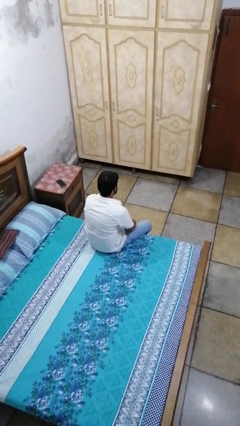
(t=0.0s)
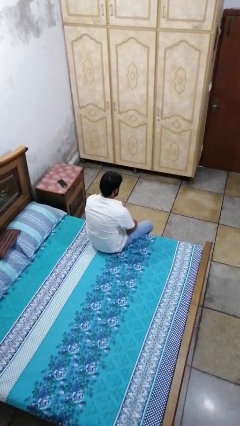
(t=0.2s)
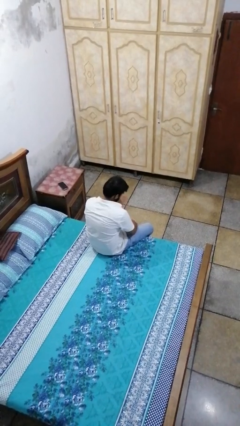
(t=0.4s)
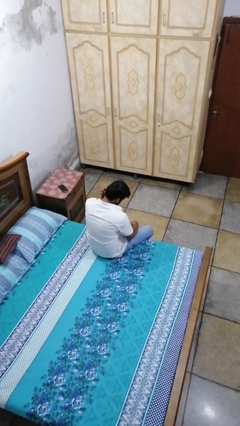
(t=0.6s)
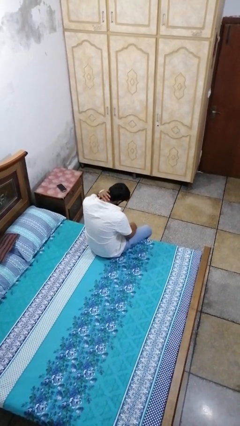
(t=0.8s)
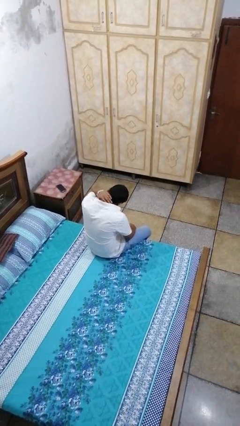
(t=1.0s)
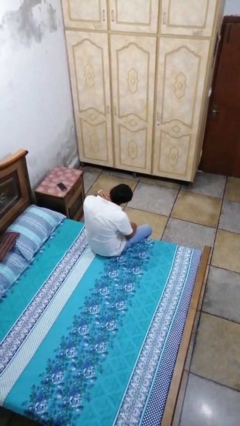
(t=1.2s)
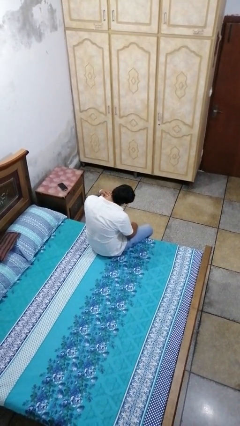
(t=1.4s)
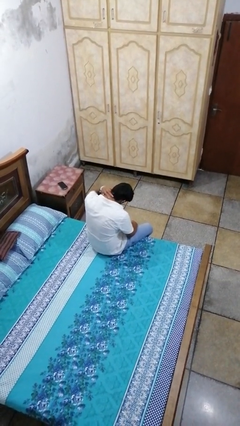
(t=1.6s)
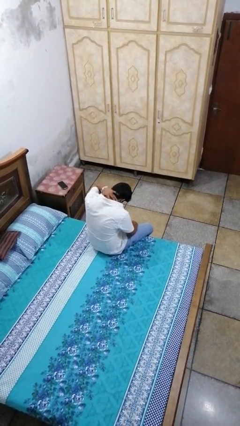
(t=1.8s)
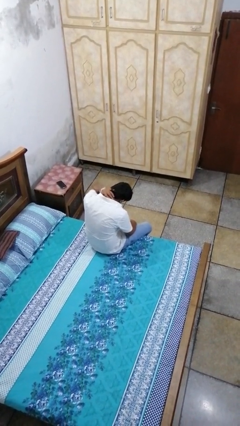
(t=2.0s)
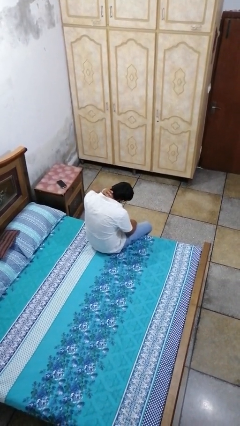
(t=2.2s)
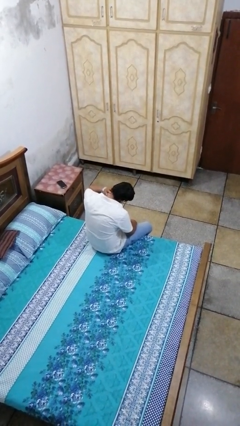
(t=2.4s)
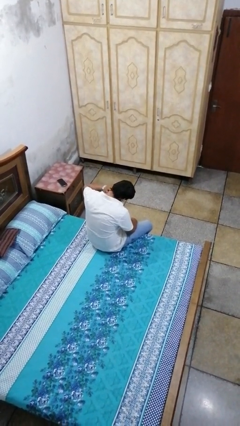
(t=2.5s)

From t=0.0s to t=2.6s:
person rubs neck

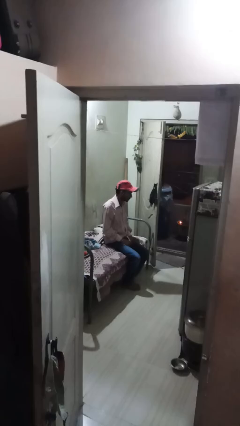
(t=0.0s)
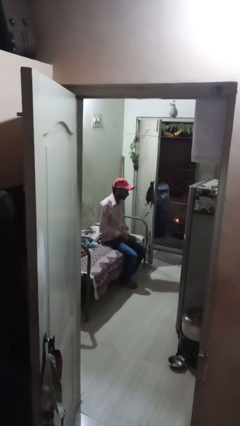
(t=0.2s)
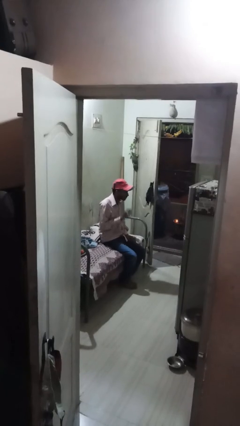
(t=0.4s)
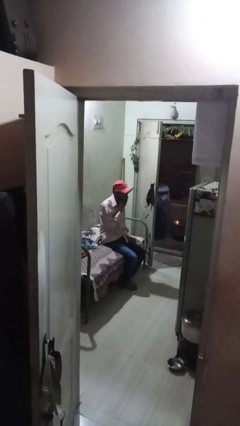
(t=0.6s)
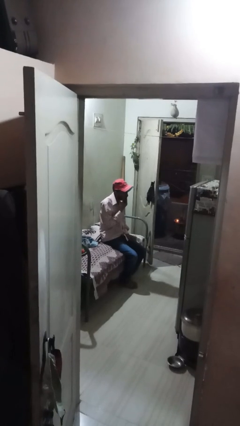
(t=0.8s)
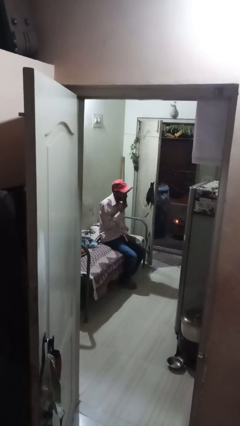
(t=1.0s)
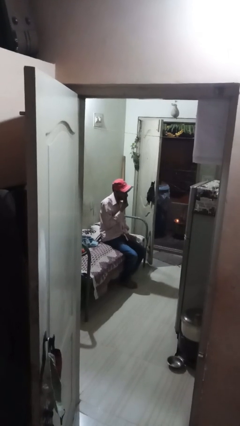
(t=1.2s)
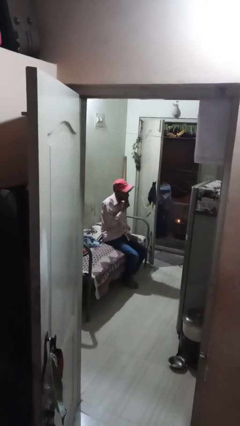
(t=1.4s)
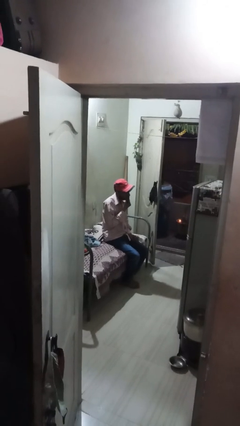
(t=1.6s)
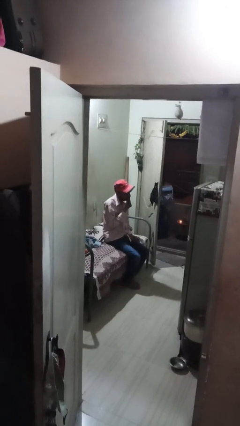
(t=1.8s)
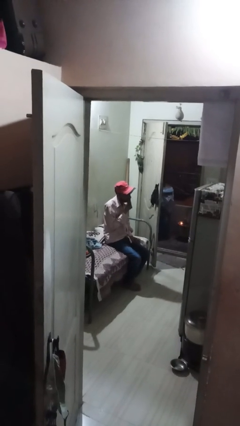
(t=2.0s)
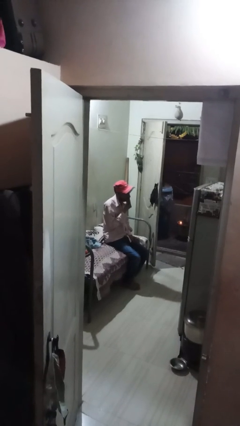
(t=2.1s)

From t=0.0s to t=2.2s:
person strokes chin

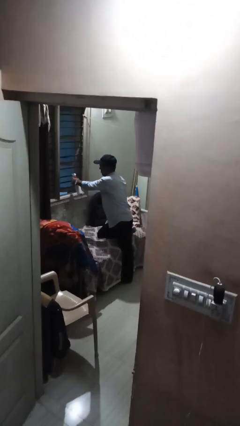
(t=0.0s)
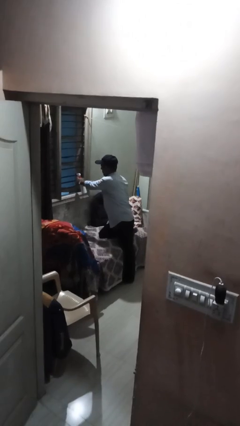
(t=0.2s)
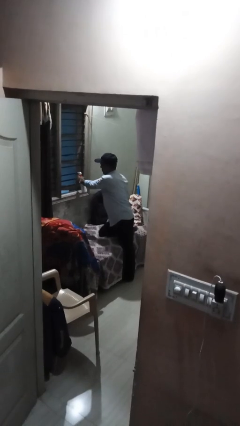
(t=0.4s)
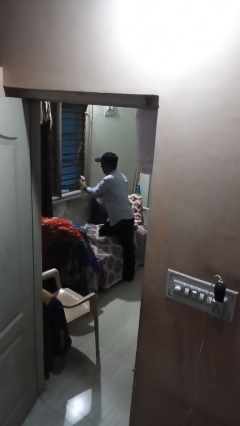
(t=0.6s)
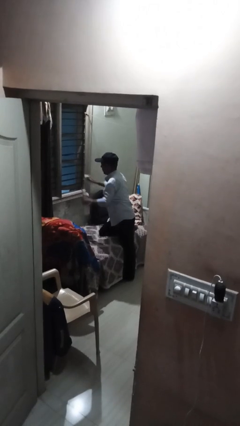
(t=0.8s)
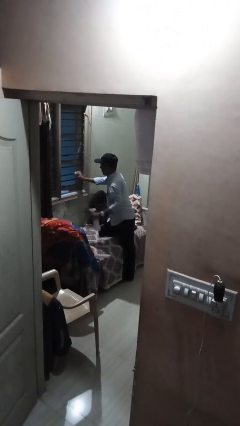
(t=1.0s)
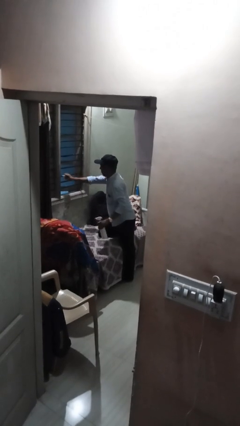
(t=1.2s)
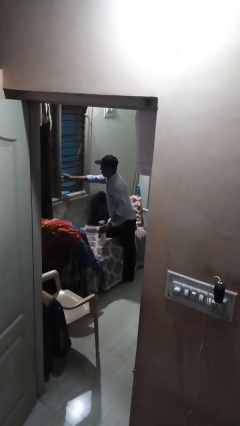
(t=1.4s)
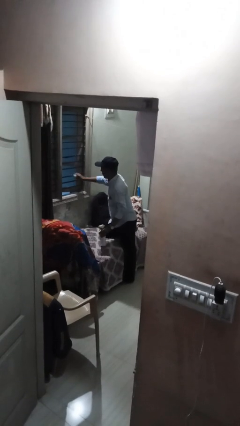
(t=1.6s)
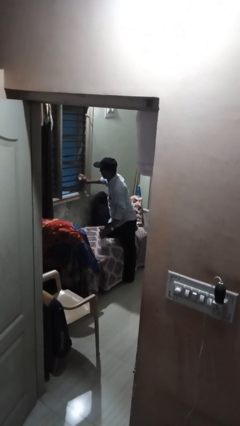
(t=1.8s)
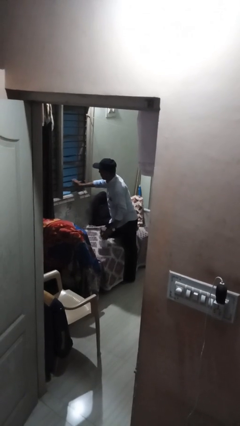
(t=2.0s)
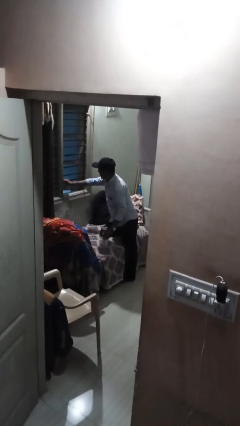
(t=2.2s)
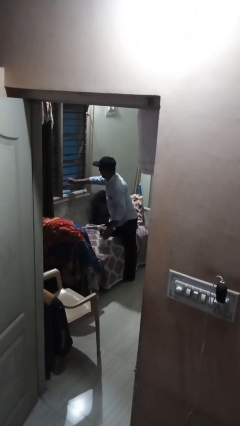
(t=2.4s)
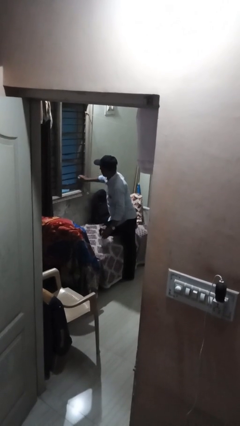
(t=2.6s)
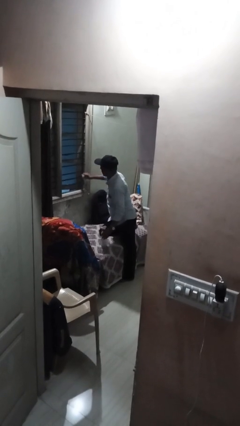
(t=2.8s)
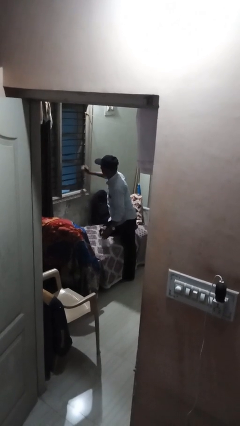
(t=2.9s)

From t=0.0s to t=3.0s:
person washes window

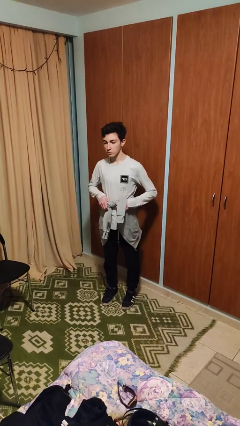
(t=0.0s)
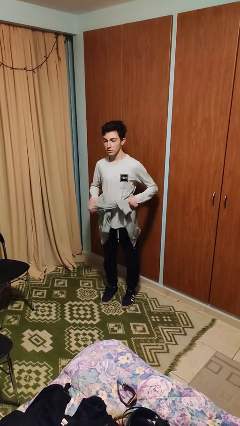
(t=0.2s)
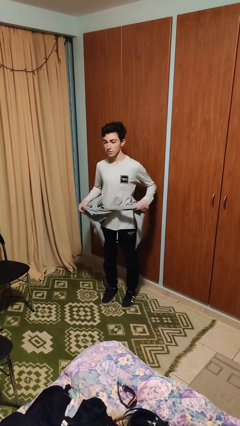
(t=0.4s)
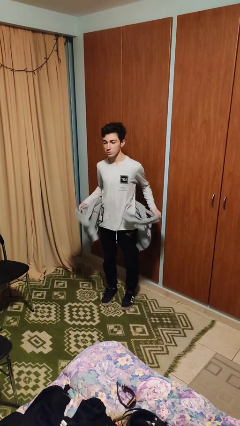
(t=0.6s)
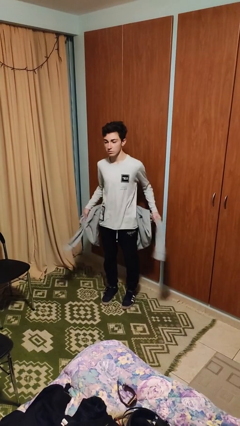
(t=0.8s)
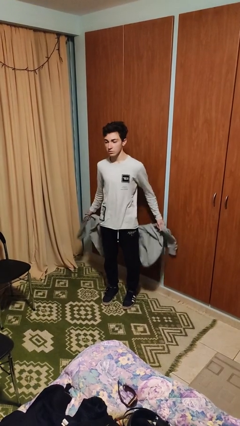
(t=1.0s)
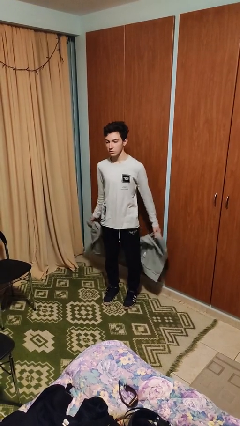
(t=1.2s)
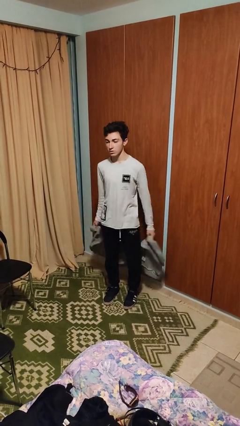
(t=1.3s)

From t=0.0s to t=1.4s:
person unties jacket around waist

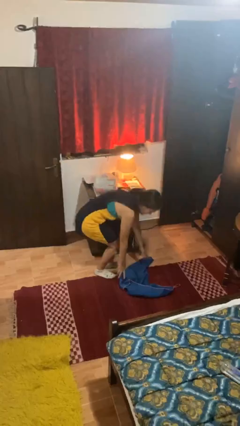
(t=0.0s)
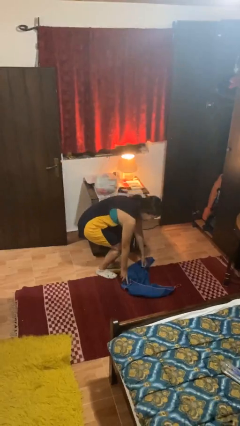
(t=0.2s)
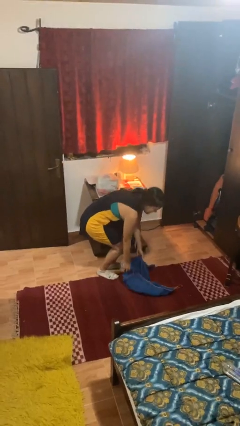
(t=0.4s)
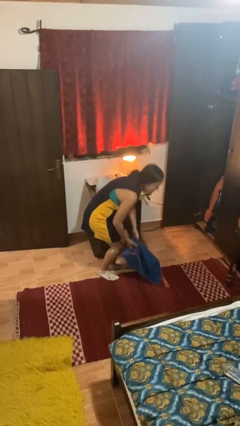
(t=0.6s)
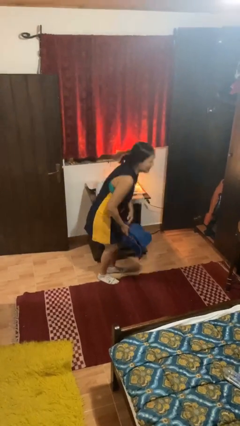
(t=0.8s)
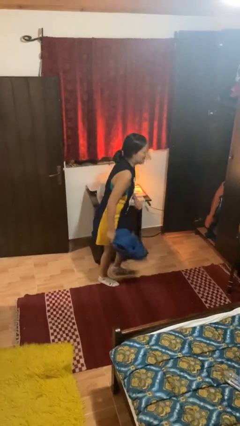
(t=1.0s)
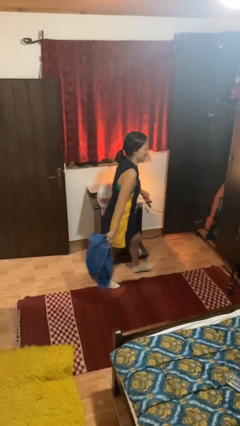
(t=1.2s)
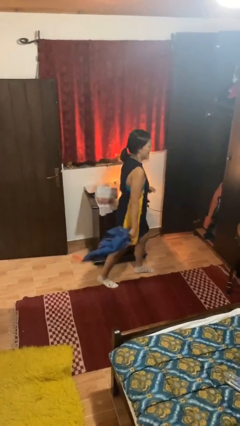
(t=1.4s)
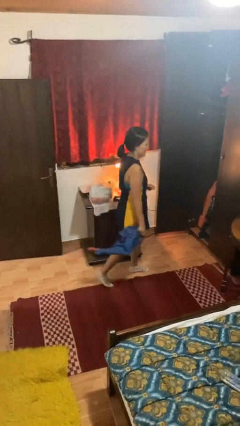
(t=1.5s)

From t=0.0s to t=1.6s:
person picks up object from floor

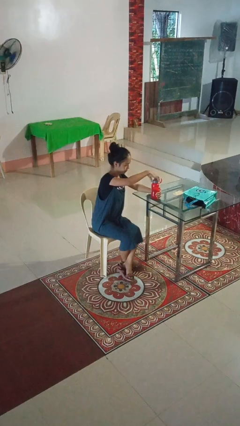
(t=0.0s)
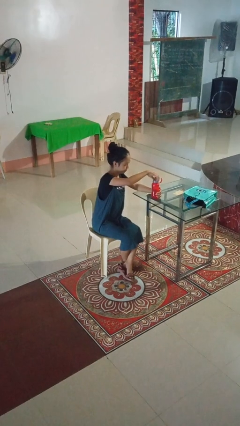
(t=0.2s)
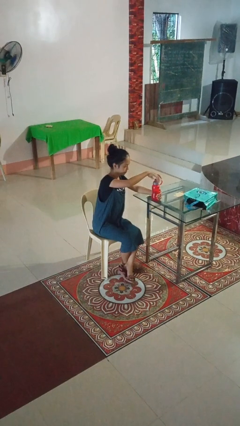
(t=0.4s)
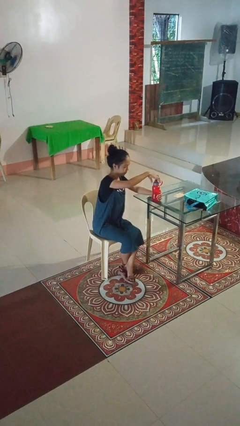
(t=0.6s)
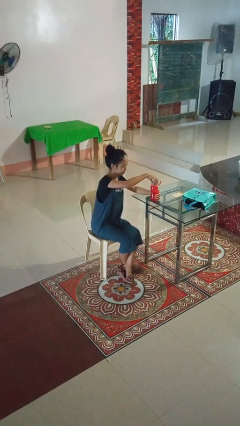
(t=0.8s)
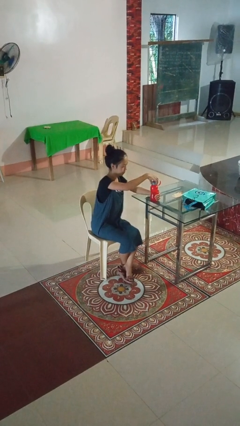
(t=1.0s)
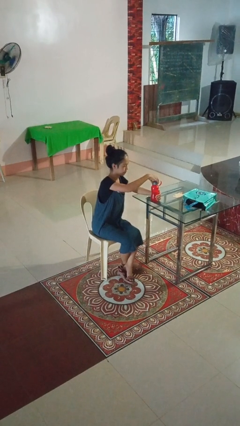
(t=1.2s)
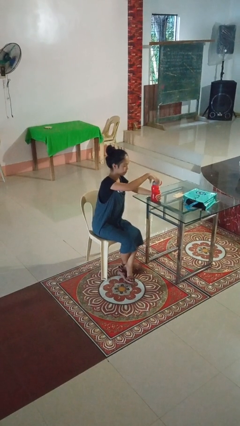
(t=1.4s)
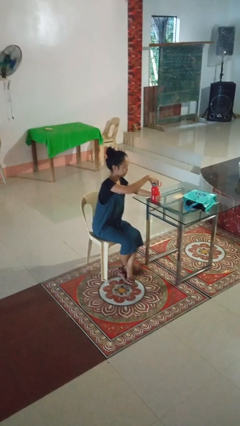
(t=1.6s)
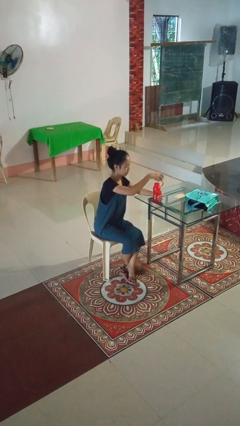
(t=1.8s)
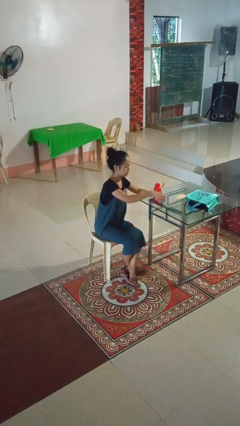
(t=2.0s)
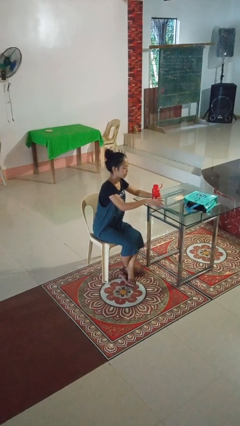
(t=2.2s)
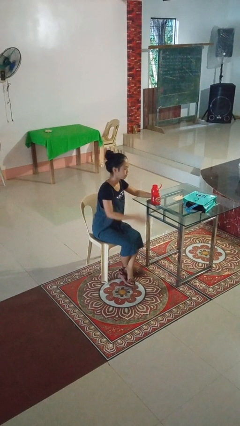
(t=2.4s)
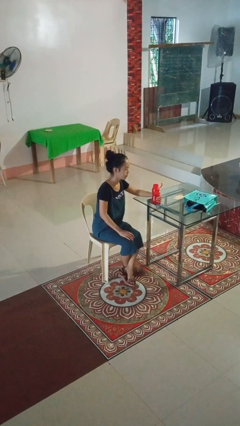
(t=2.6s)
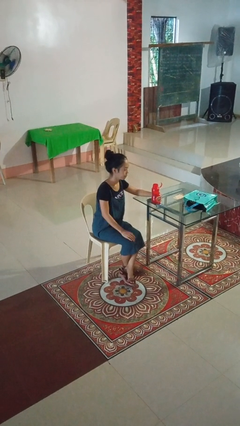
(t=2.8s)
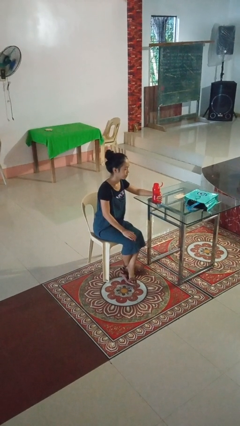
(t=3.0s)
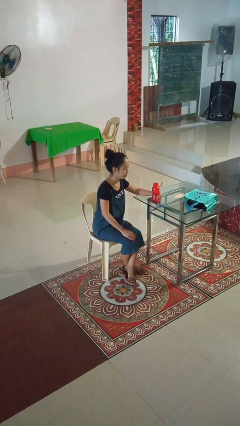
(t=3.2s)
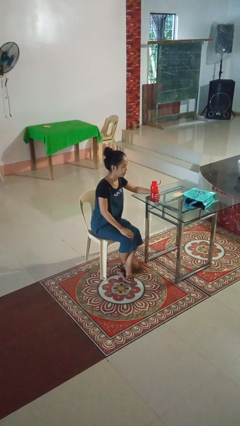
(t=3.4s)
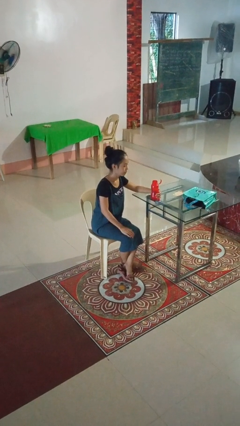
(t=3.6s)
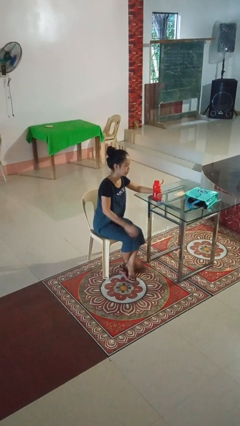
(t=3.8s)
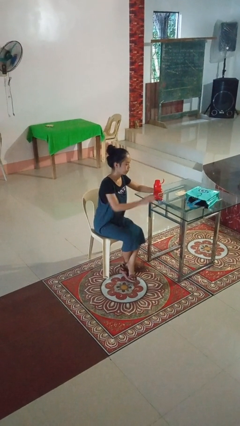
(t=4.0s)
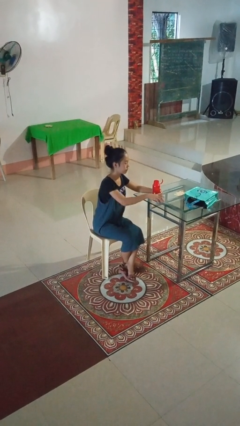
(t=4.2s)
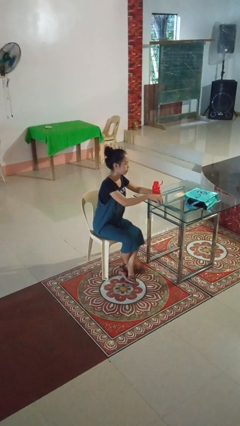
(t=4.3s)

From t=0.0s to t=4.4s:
person unscrews lid from bottle

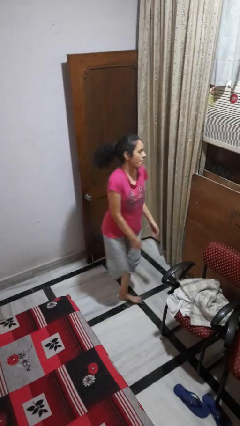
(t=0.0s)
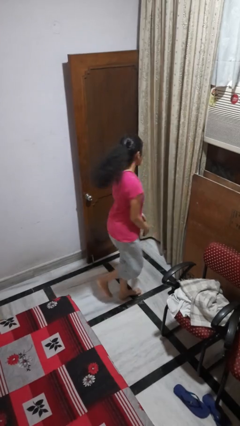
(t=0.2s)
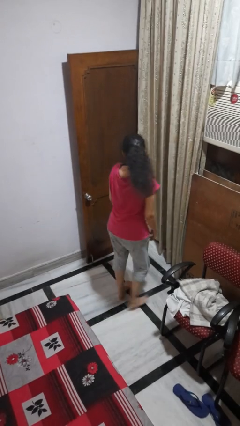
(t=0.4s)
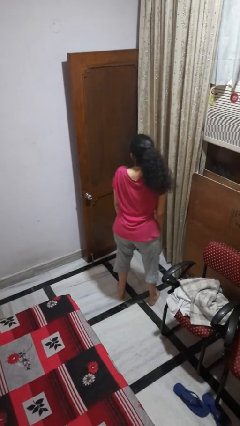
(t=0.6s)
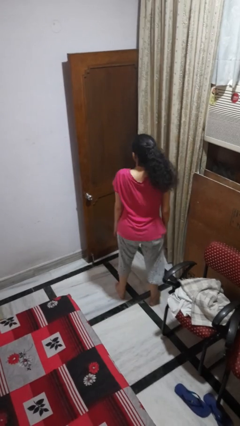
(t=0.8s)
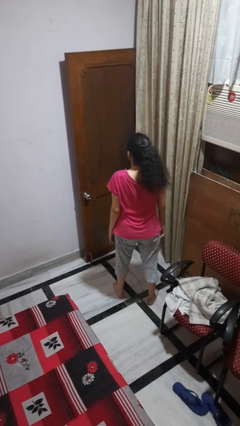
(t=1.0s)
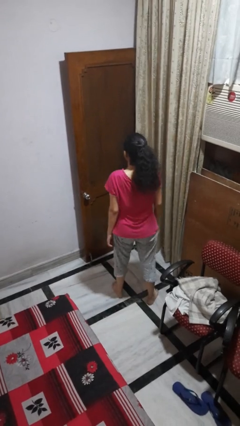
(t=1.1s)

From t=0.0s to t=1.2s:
person twirls

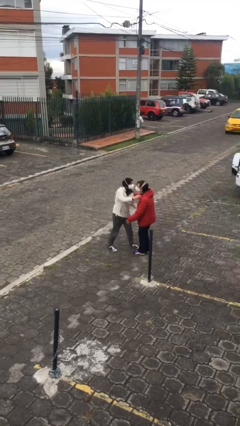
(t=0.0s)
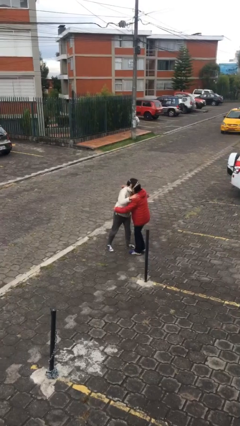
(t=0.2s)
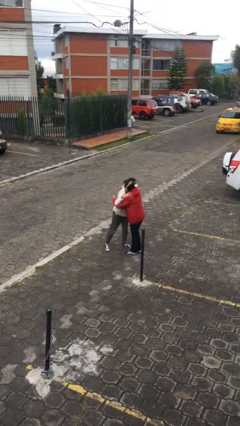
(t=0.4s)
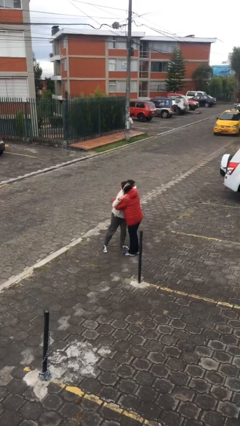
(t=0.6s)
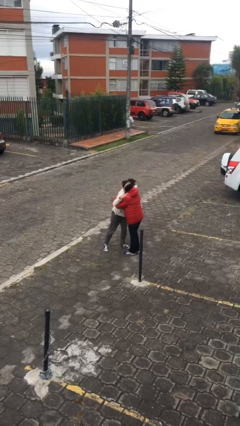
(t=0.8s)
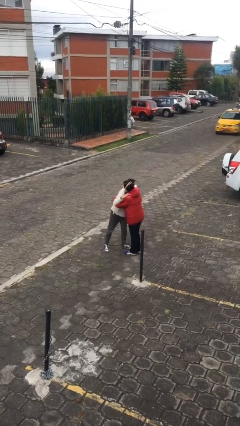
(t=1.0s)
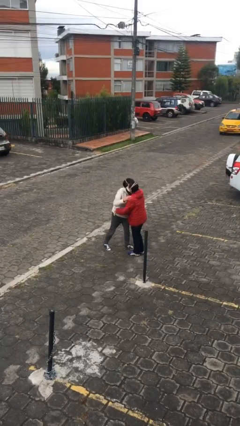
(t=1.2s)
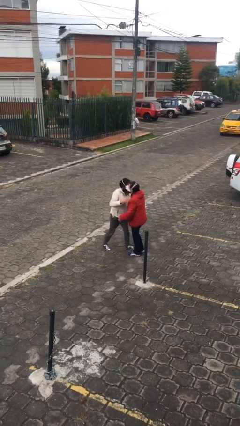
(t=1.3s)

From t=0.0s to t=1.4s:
person embraces person
